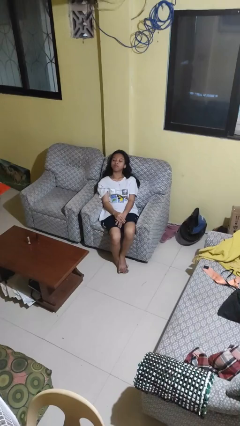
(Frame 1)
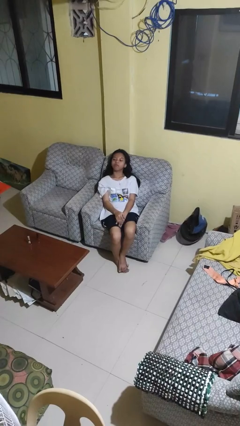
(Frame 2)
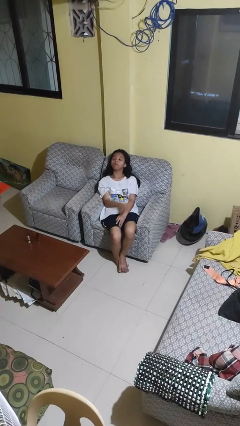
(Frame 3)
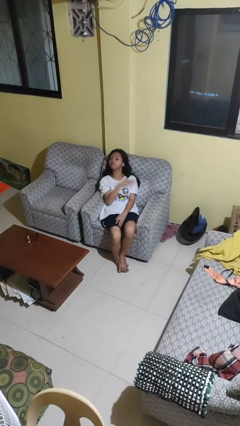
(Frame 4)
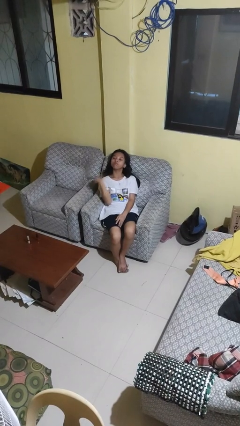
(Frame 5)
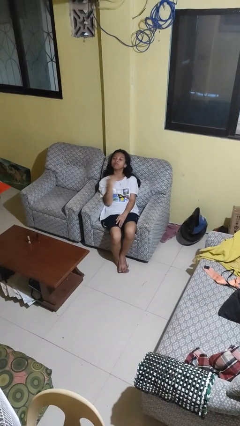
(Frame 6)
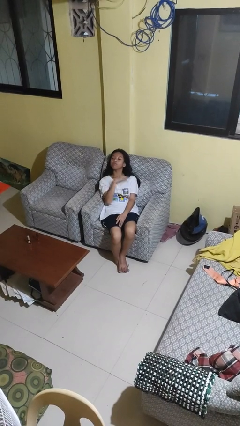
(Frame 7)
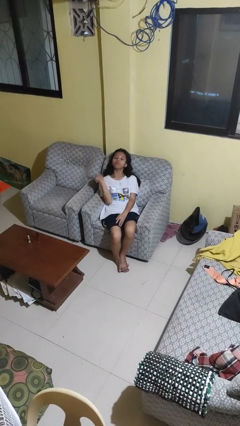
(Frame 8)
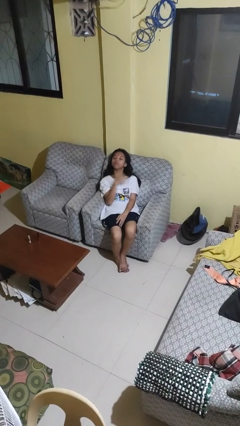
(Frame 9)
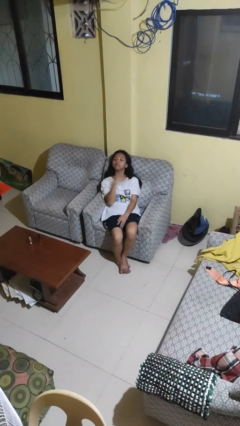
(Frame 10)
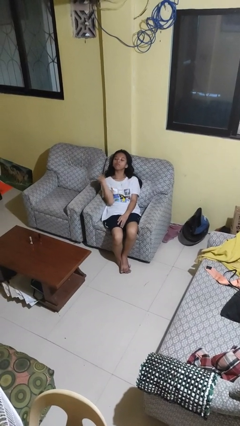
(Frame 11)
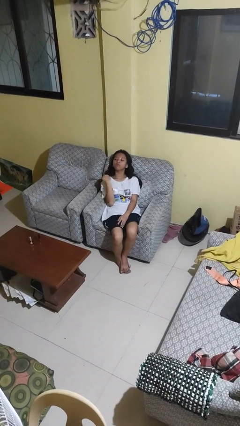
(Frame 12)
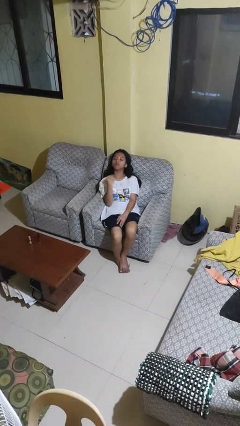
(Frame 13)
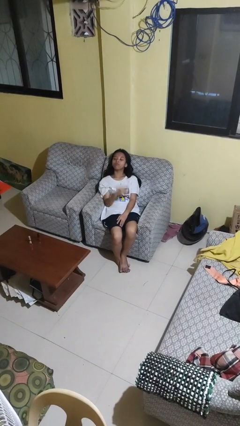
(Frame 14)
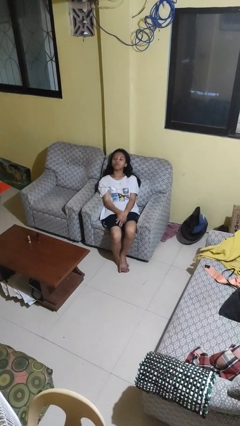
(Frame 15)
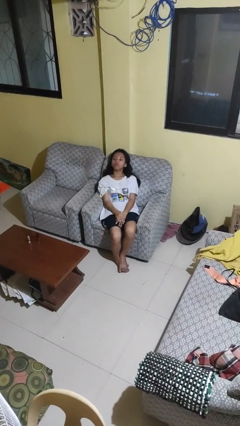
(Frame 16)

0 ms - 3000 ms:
person gestures cut

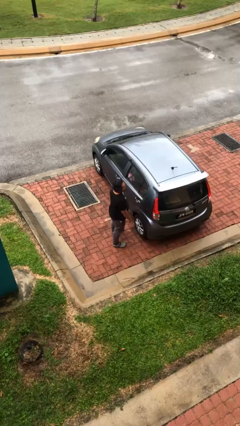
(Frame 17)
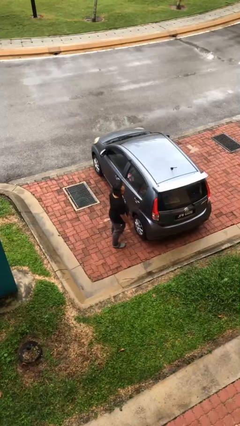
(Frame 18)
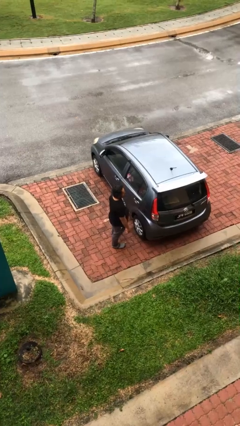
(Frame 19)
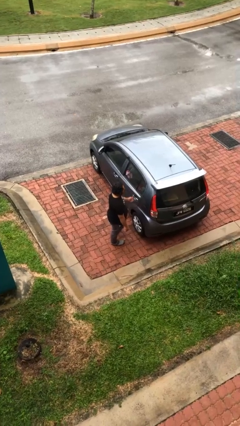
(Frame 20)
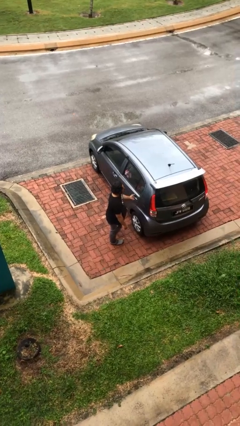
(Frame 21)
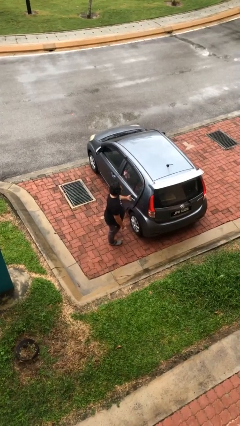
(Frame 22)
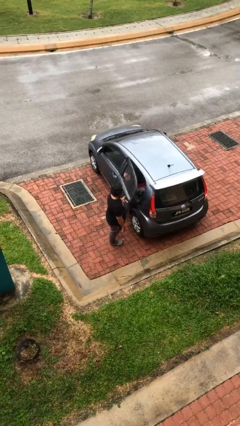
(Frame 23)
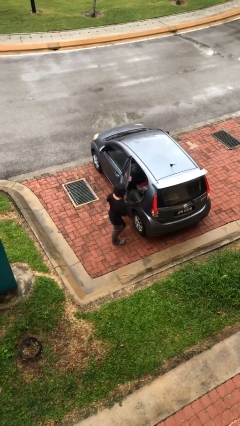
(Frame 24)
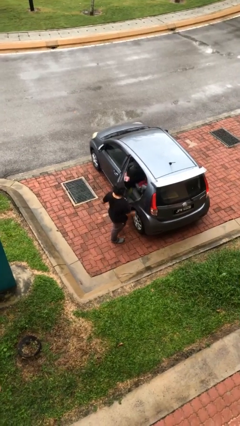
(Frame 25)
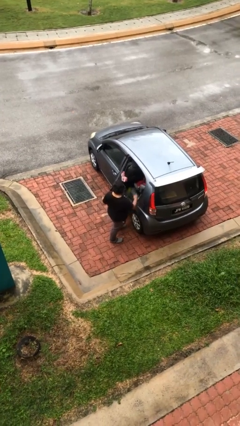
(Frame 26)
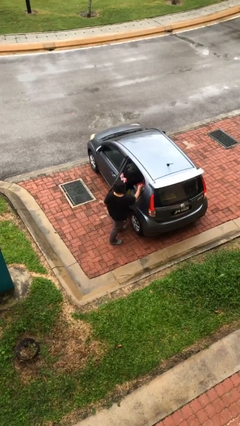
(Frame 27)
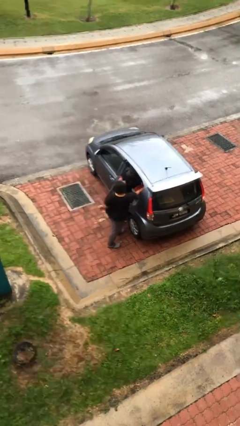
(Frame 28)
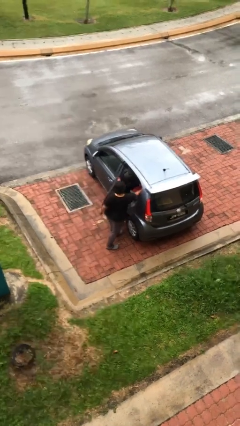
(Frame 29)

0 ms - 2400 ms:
person opens car door

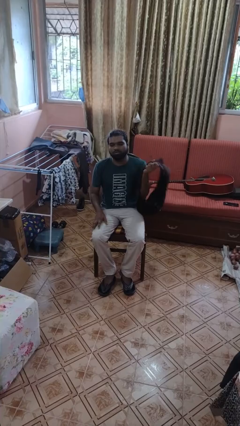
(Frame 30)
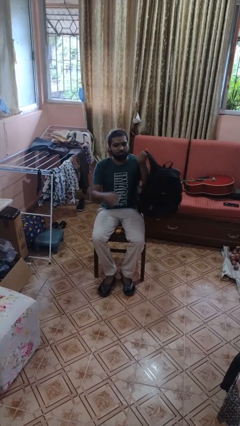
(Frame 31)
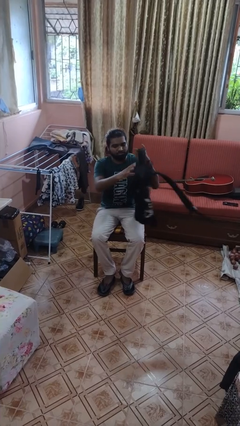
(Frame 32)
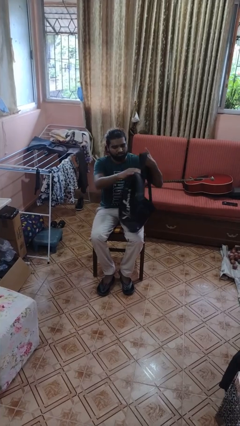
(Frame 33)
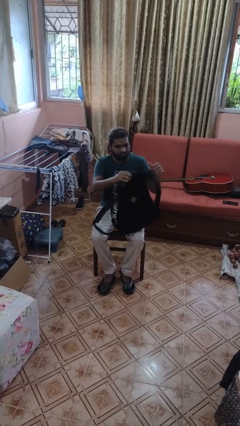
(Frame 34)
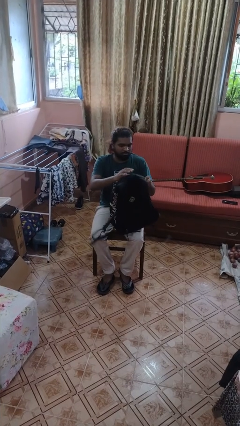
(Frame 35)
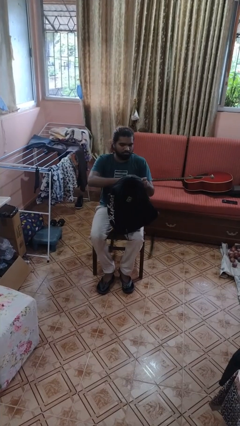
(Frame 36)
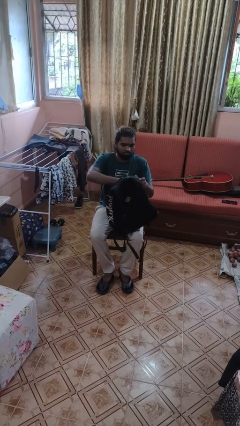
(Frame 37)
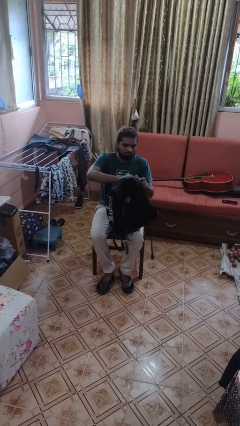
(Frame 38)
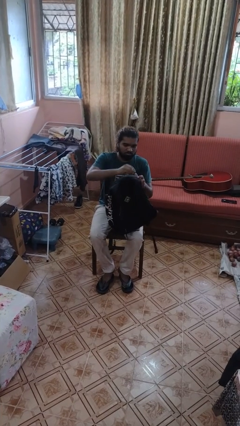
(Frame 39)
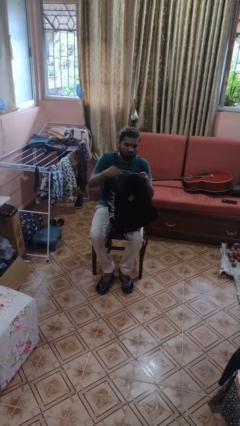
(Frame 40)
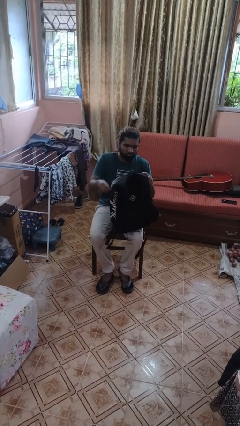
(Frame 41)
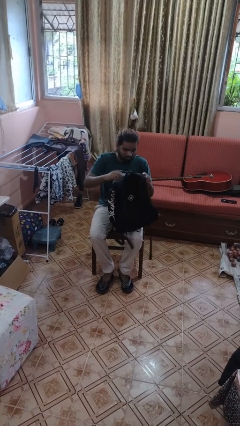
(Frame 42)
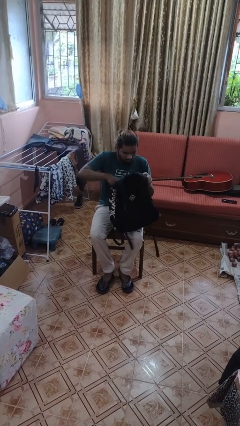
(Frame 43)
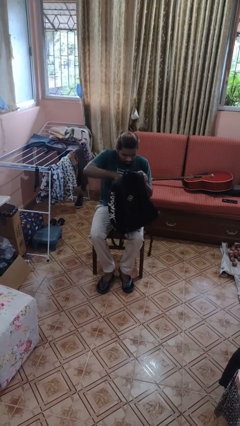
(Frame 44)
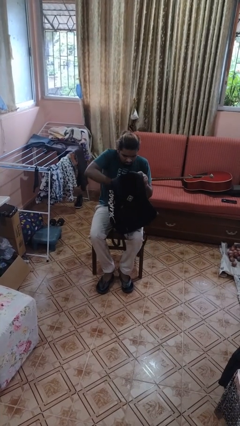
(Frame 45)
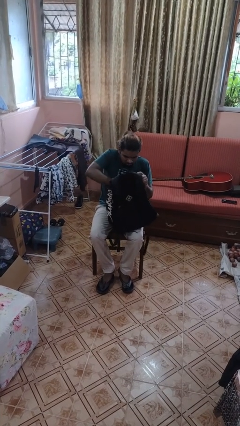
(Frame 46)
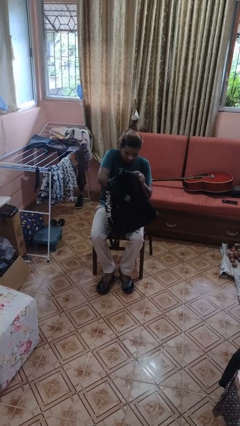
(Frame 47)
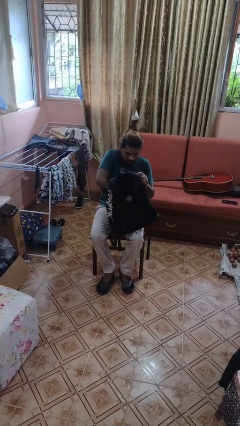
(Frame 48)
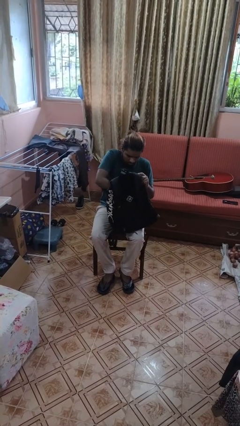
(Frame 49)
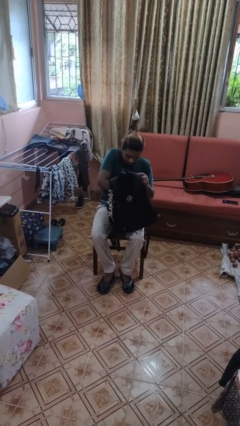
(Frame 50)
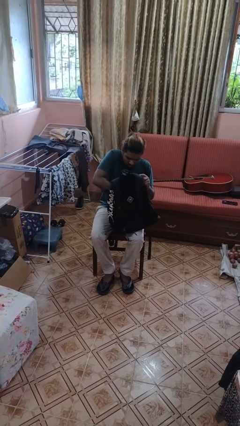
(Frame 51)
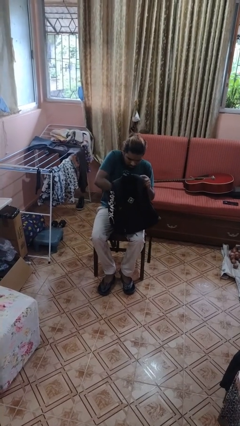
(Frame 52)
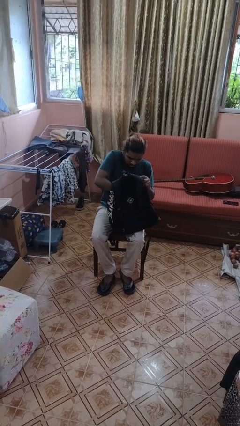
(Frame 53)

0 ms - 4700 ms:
person searches in backpack

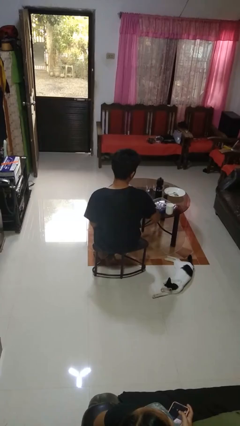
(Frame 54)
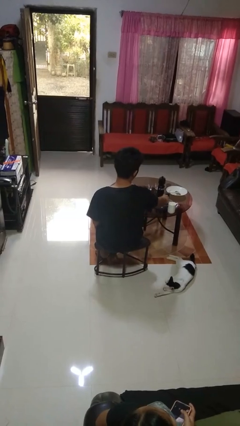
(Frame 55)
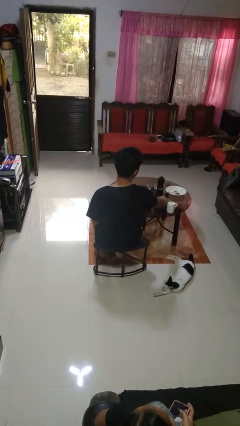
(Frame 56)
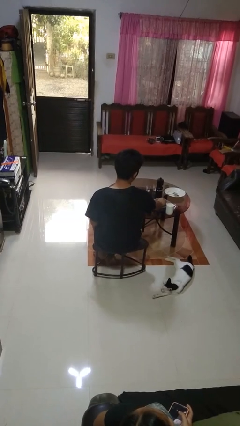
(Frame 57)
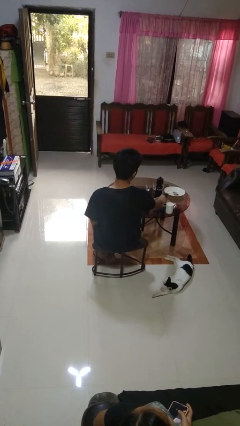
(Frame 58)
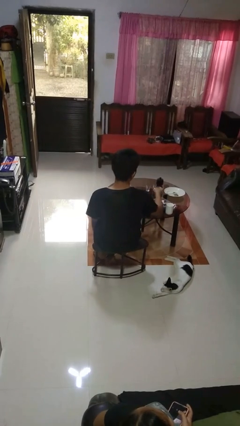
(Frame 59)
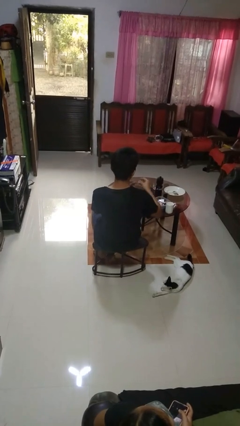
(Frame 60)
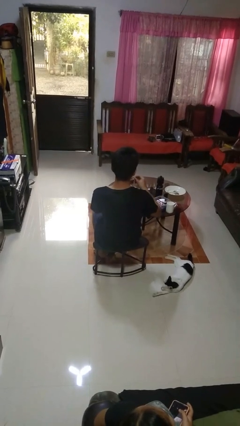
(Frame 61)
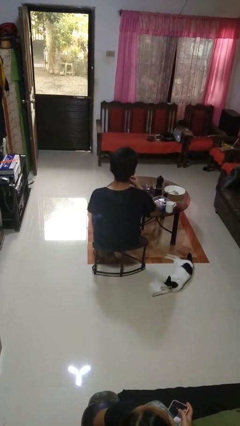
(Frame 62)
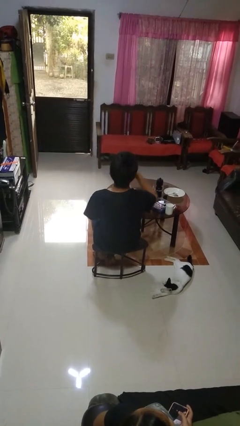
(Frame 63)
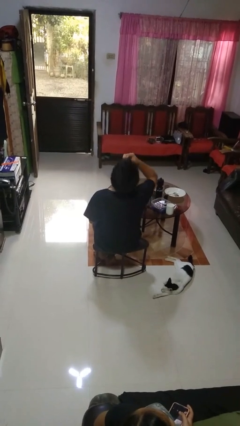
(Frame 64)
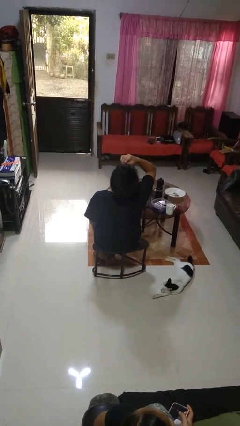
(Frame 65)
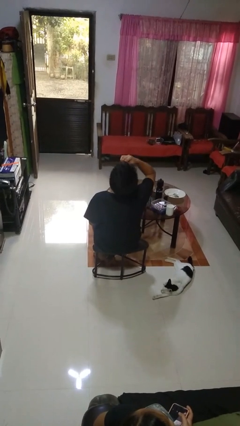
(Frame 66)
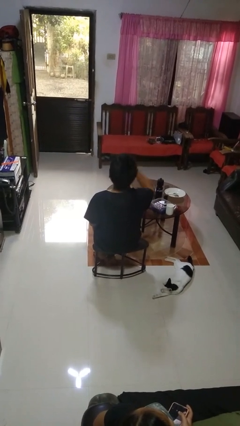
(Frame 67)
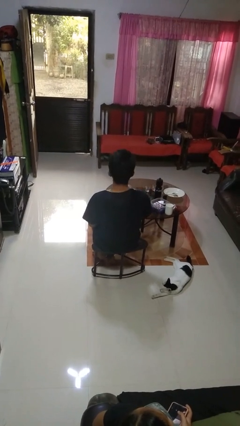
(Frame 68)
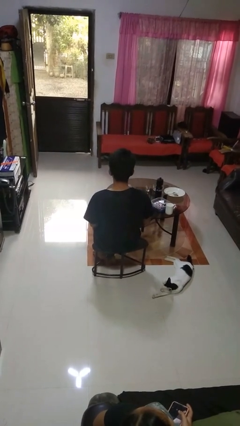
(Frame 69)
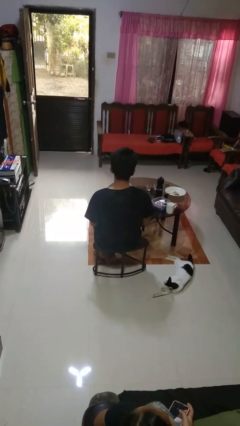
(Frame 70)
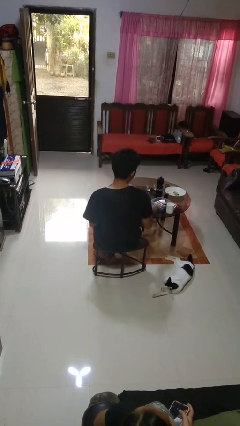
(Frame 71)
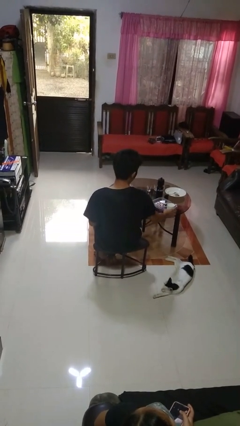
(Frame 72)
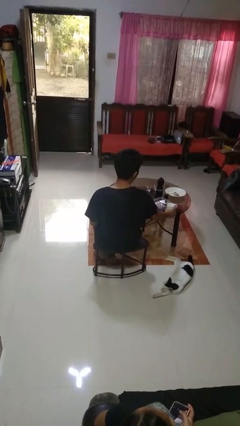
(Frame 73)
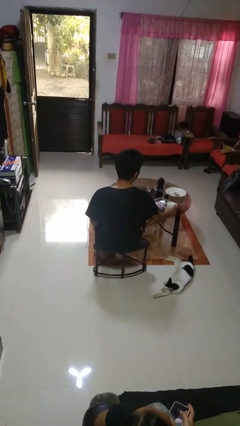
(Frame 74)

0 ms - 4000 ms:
person takes medicine pills

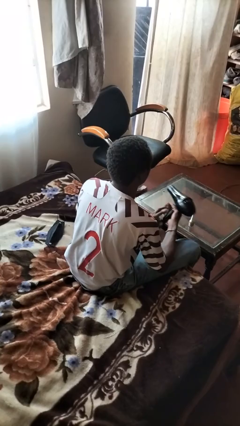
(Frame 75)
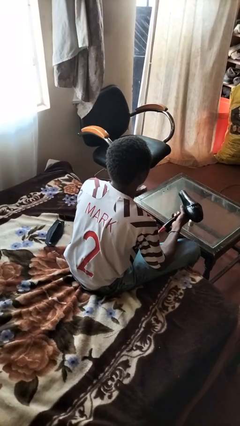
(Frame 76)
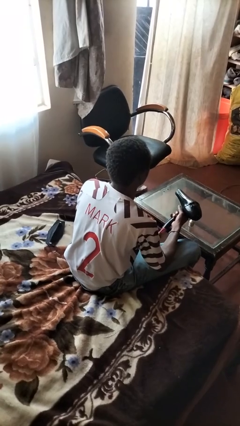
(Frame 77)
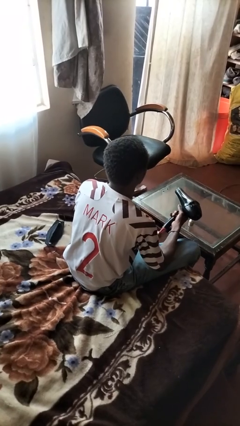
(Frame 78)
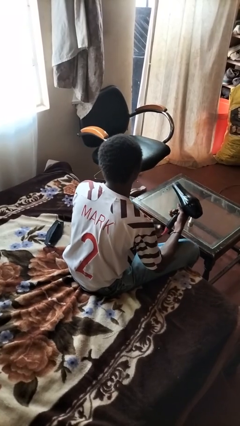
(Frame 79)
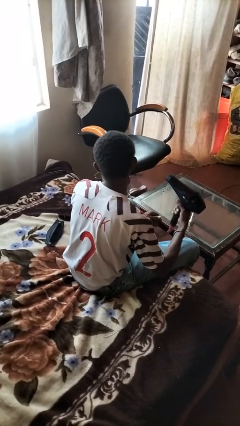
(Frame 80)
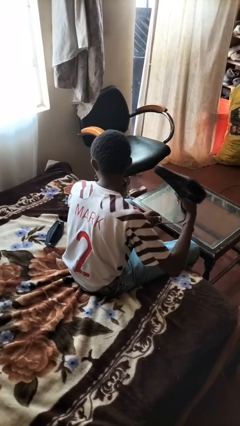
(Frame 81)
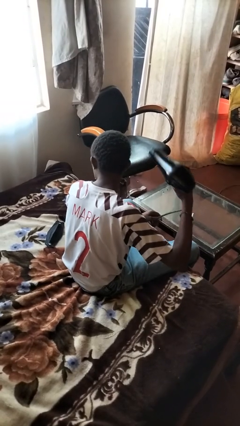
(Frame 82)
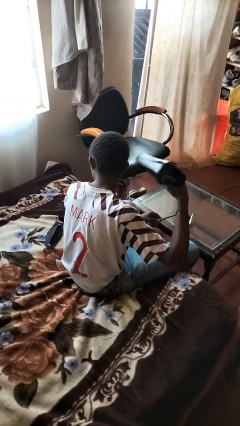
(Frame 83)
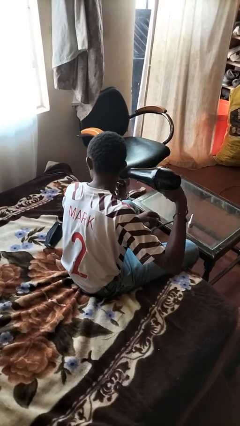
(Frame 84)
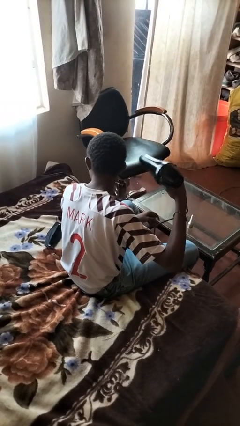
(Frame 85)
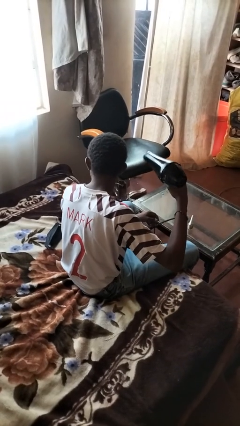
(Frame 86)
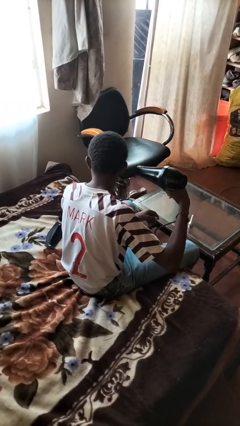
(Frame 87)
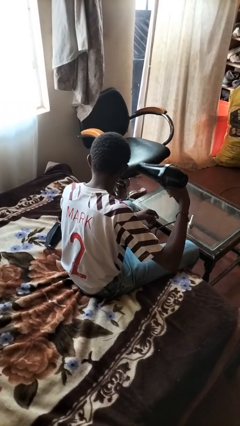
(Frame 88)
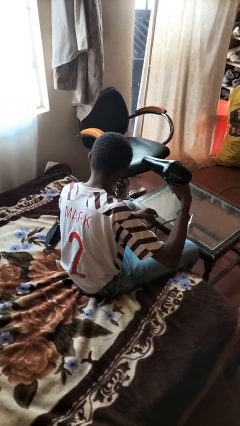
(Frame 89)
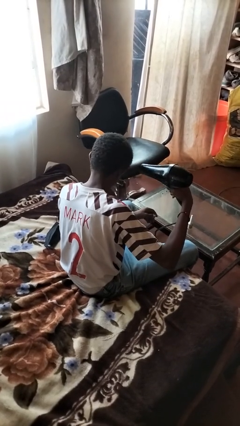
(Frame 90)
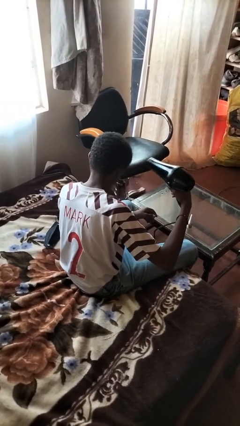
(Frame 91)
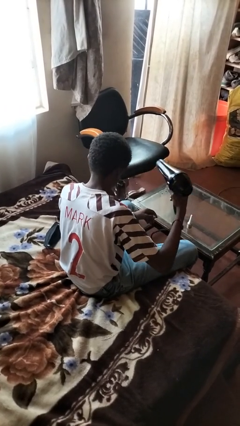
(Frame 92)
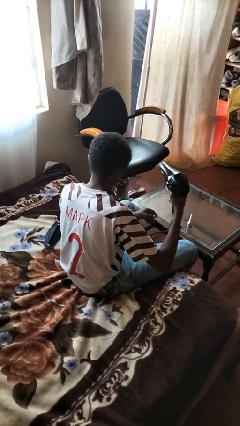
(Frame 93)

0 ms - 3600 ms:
person dries hair with hairdryer

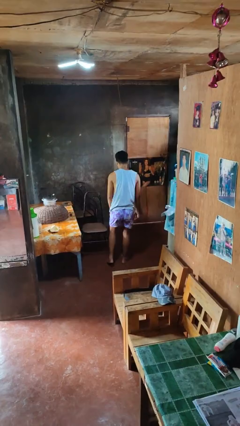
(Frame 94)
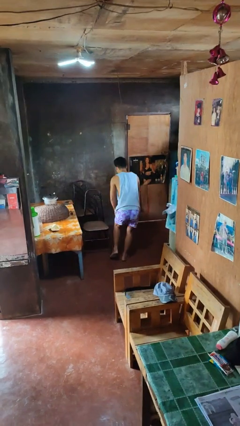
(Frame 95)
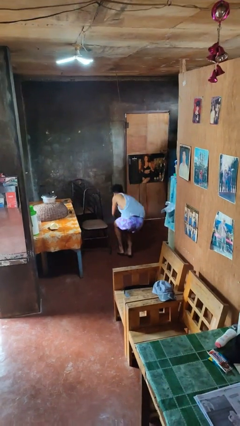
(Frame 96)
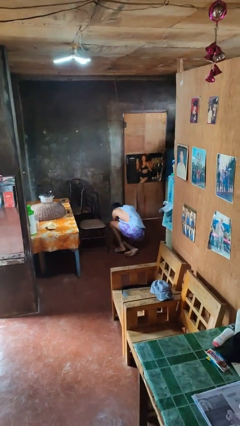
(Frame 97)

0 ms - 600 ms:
person trips on object on floor
